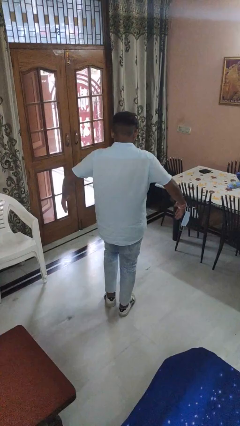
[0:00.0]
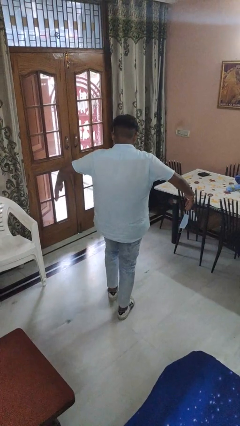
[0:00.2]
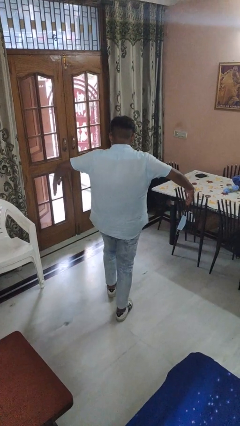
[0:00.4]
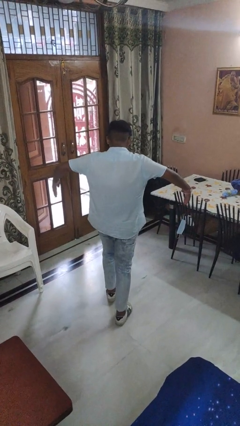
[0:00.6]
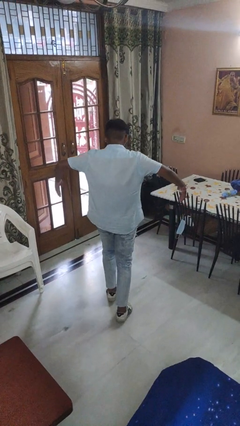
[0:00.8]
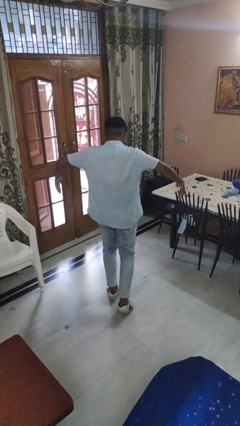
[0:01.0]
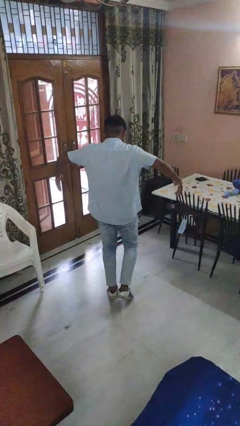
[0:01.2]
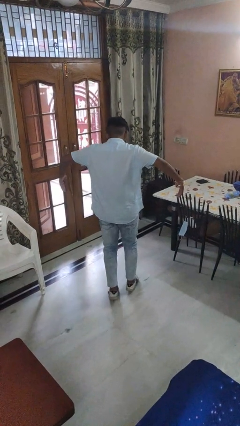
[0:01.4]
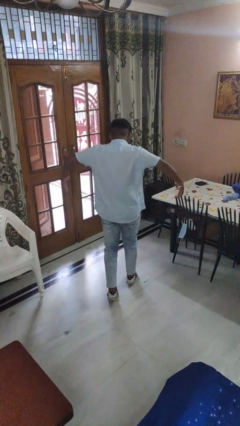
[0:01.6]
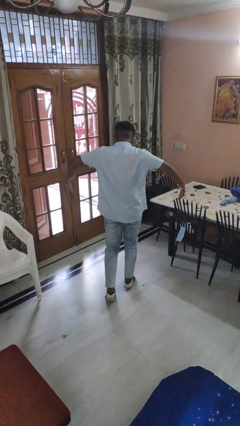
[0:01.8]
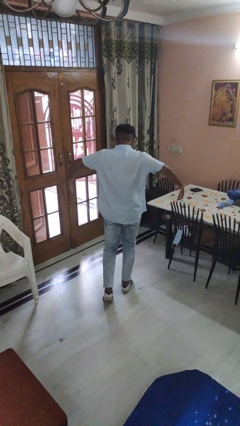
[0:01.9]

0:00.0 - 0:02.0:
person walks tiptoe

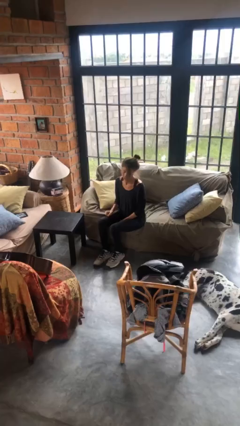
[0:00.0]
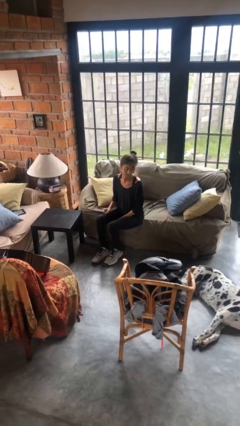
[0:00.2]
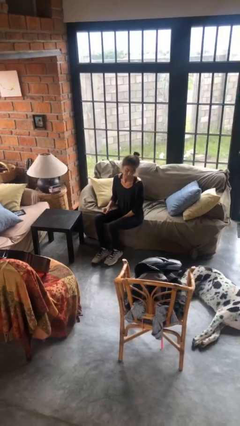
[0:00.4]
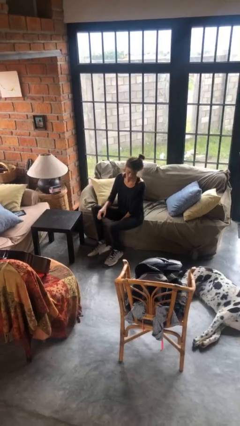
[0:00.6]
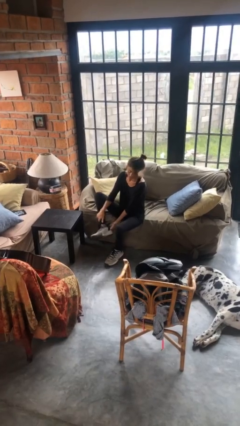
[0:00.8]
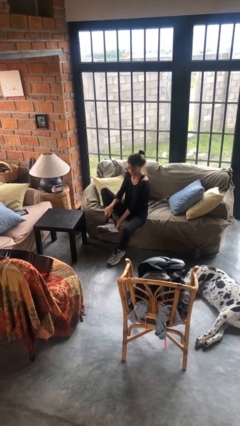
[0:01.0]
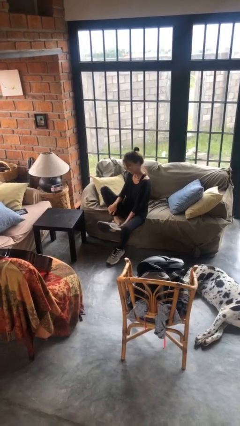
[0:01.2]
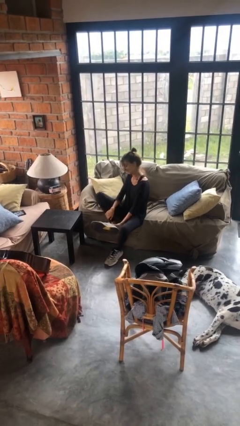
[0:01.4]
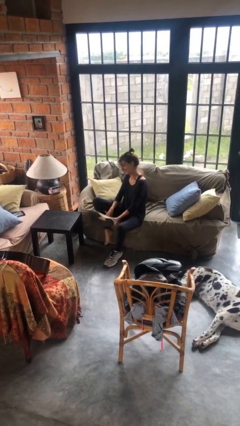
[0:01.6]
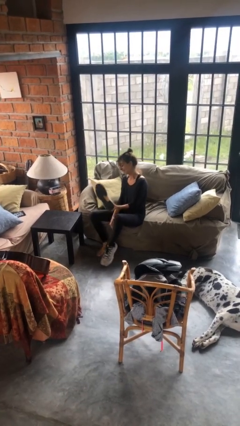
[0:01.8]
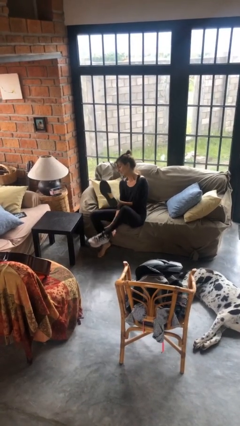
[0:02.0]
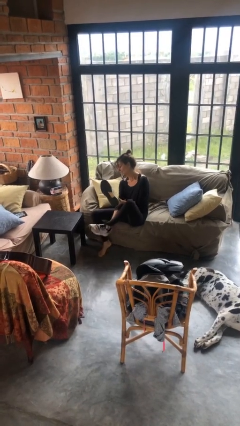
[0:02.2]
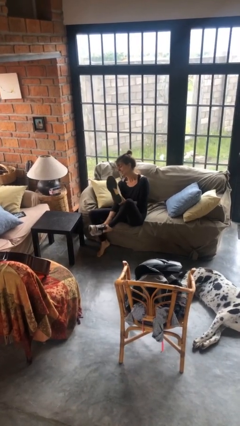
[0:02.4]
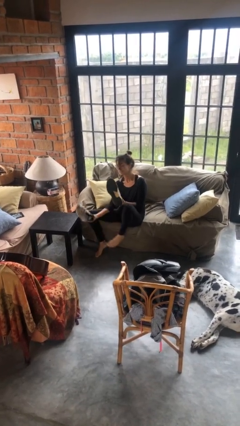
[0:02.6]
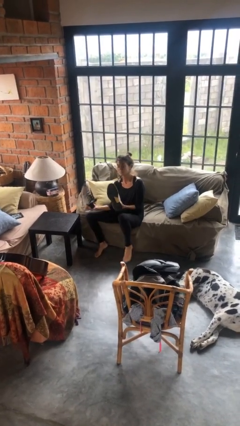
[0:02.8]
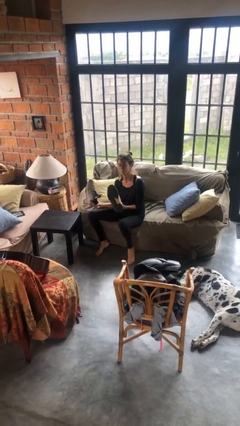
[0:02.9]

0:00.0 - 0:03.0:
person takes off shoes

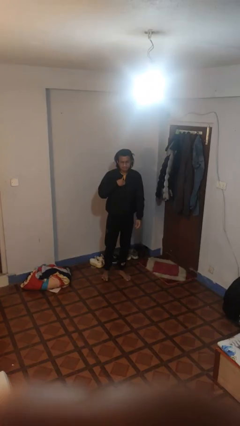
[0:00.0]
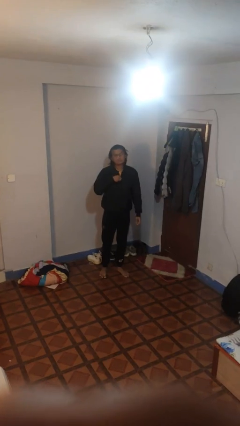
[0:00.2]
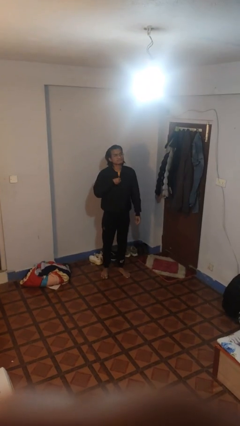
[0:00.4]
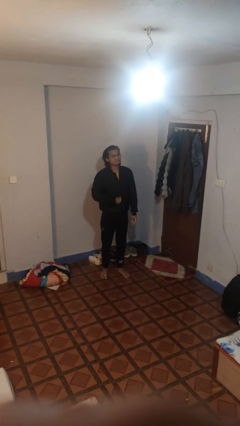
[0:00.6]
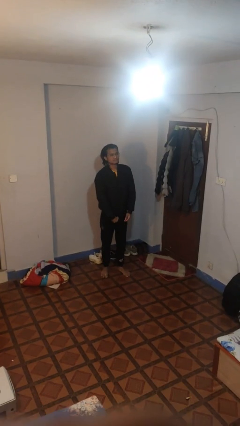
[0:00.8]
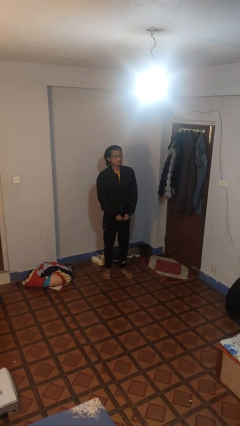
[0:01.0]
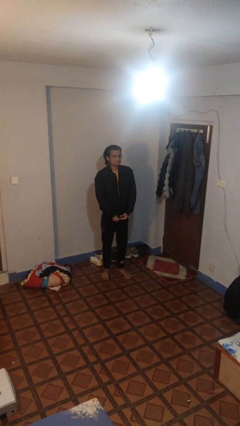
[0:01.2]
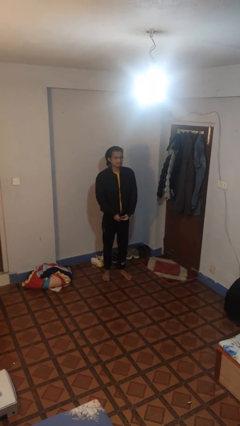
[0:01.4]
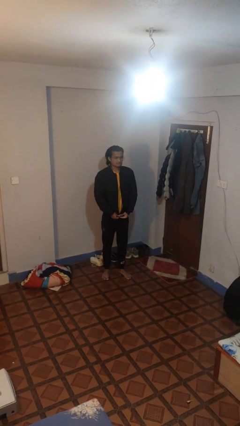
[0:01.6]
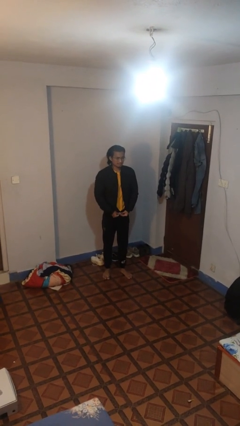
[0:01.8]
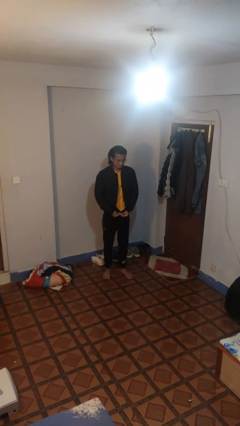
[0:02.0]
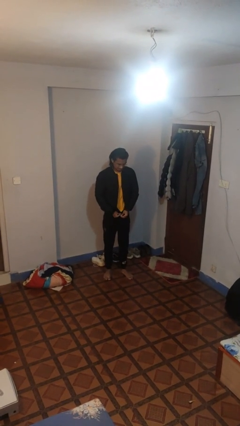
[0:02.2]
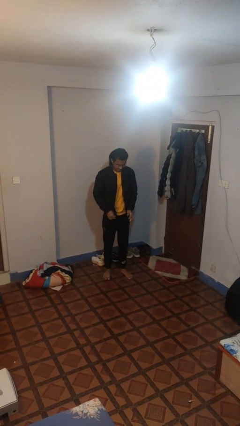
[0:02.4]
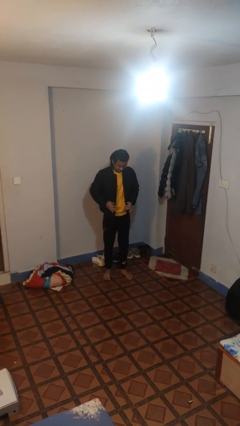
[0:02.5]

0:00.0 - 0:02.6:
person unzips jacket

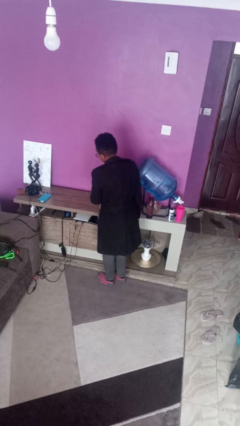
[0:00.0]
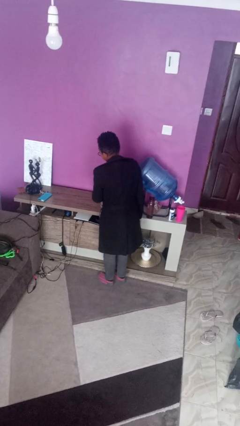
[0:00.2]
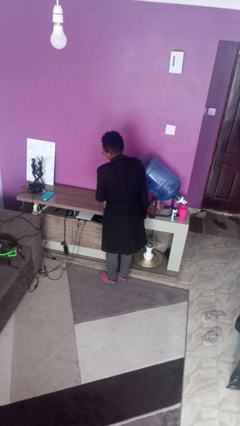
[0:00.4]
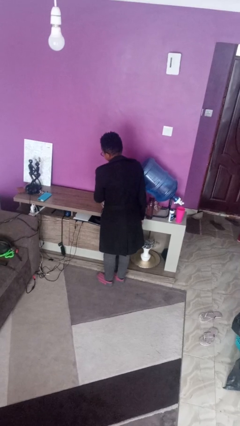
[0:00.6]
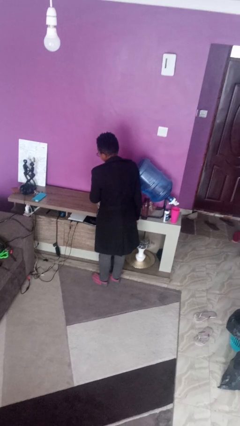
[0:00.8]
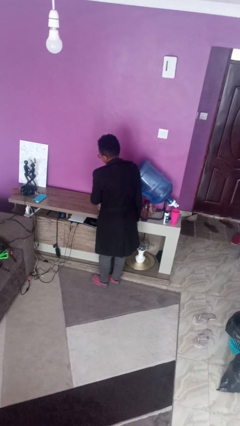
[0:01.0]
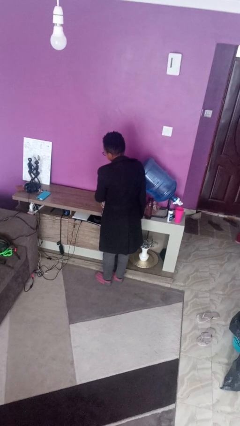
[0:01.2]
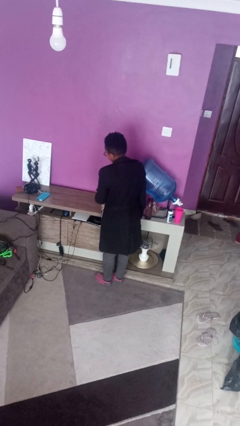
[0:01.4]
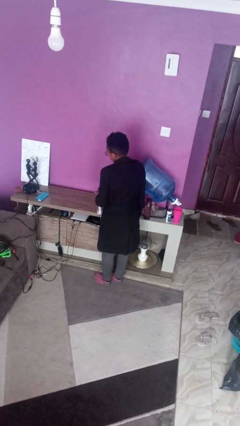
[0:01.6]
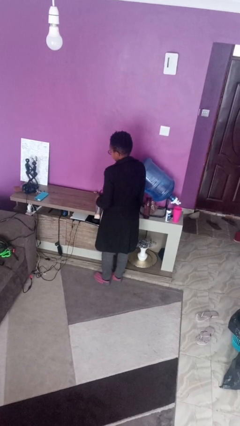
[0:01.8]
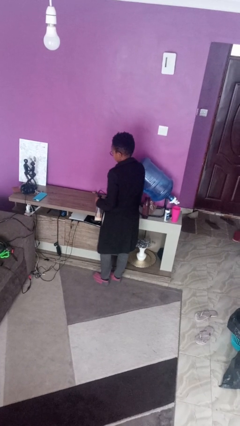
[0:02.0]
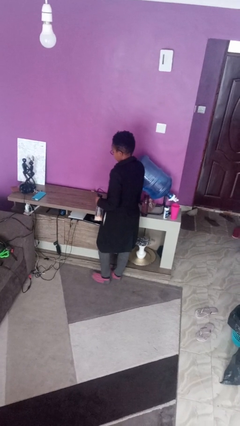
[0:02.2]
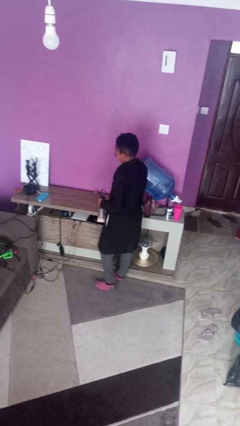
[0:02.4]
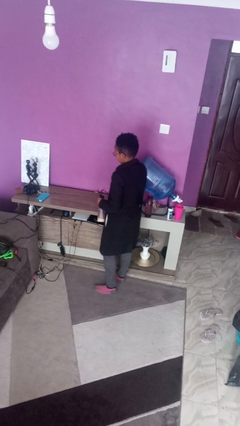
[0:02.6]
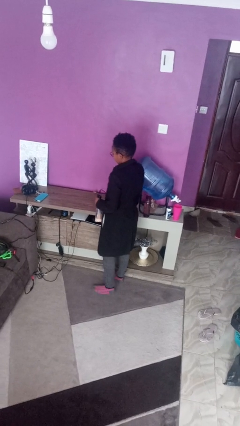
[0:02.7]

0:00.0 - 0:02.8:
person sprays from bottle

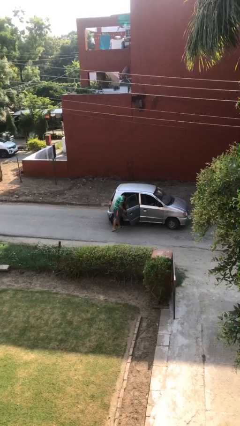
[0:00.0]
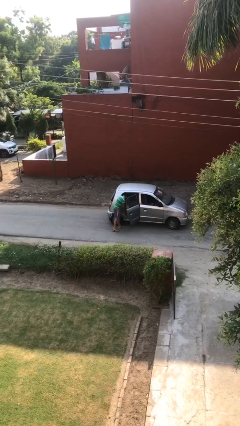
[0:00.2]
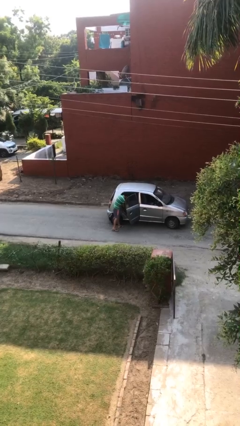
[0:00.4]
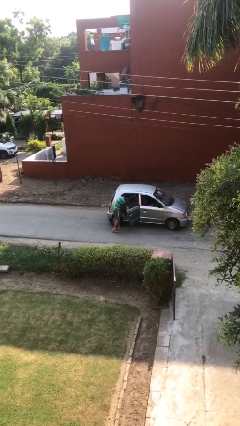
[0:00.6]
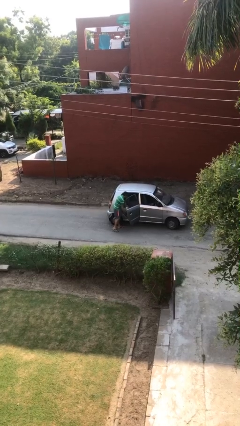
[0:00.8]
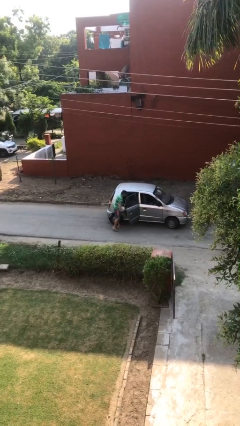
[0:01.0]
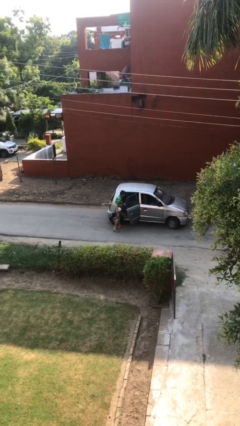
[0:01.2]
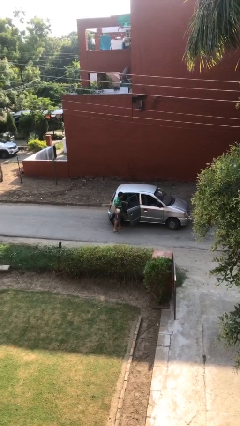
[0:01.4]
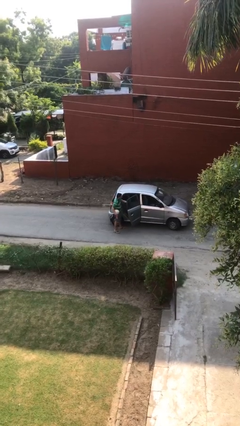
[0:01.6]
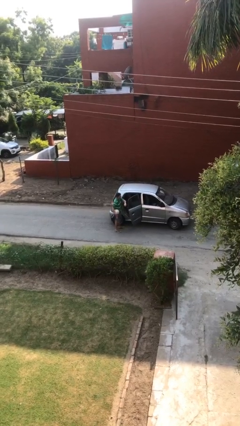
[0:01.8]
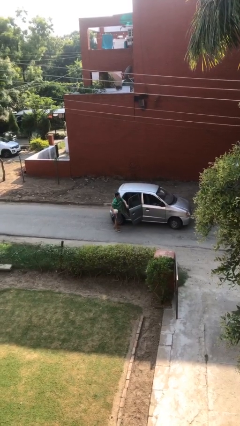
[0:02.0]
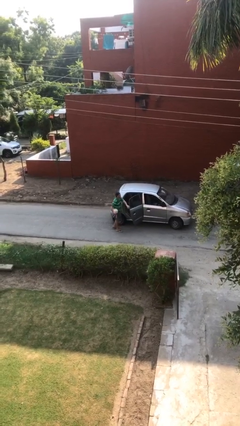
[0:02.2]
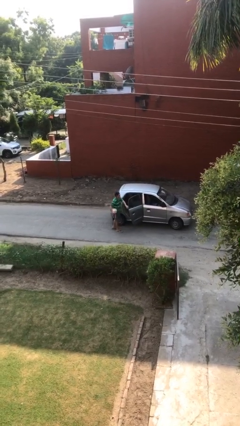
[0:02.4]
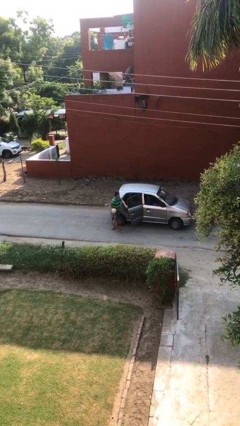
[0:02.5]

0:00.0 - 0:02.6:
person unloads car

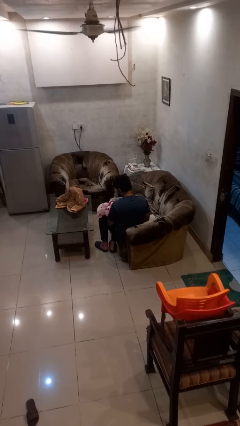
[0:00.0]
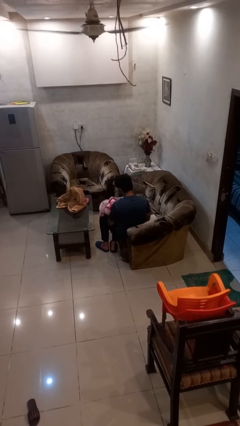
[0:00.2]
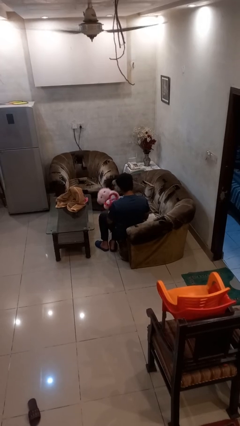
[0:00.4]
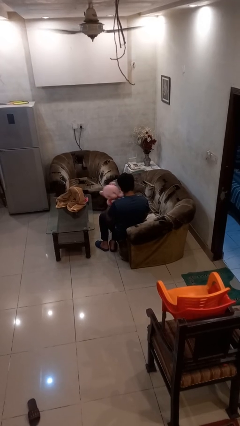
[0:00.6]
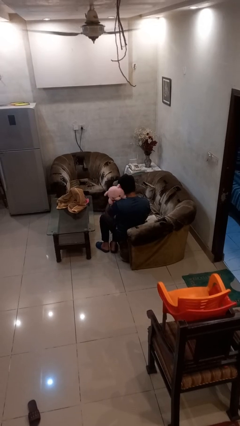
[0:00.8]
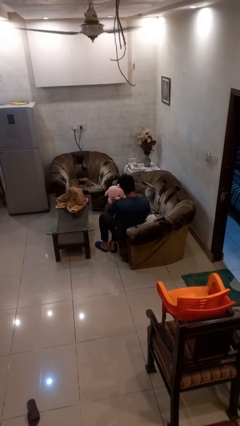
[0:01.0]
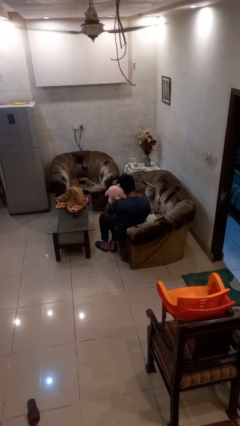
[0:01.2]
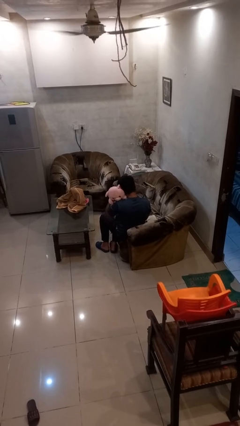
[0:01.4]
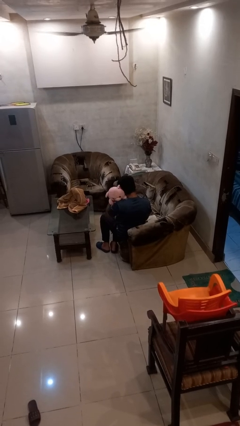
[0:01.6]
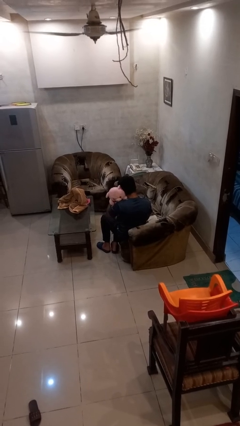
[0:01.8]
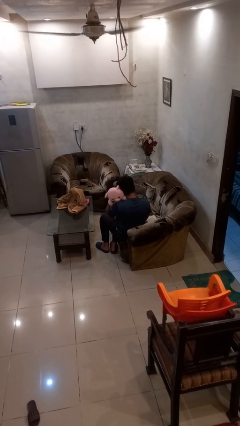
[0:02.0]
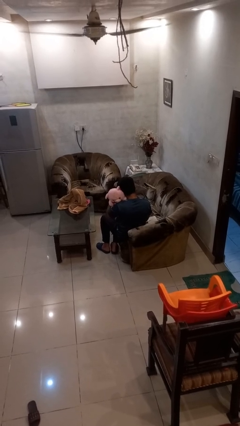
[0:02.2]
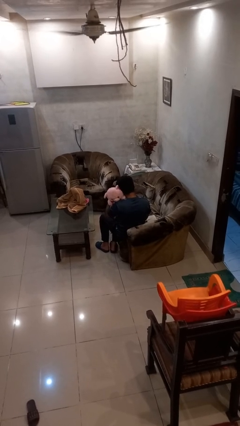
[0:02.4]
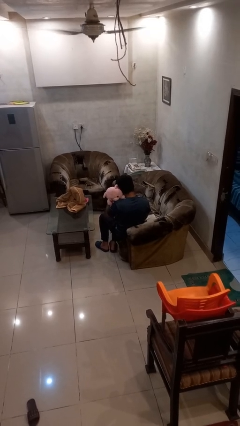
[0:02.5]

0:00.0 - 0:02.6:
person hugs stuffed animal

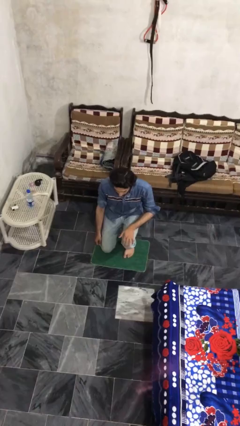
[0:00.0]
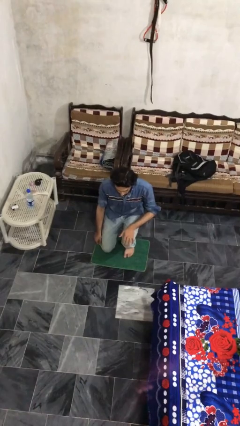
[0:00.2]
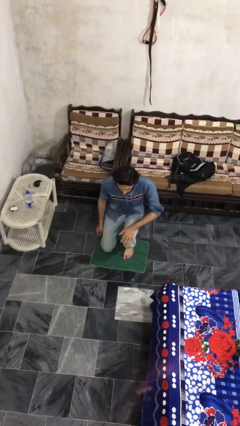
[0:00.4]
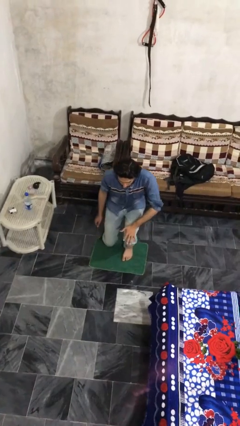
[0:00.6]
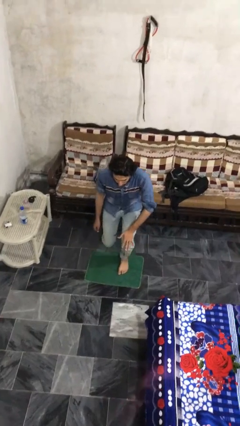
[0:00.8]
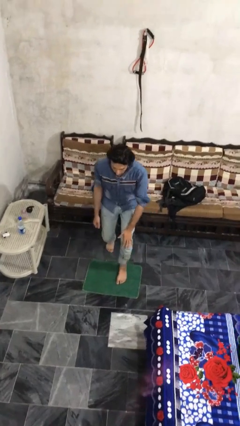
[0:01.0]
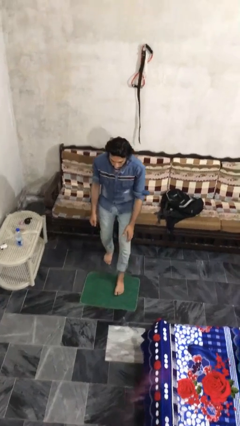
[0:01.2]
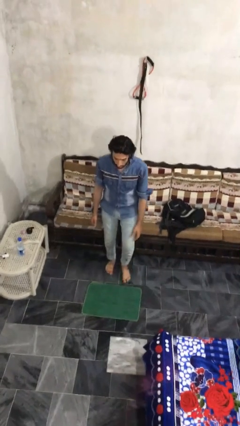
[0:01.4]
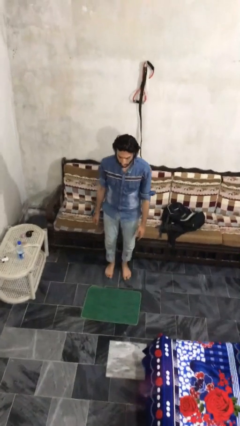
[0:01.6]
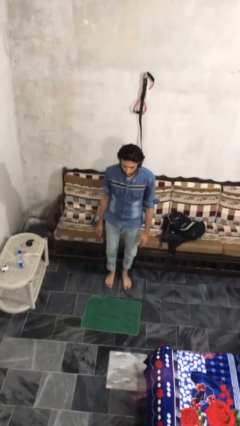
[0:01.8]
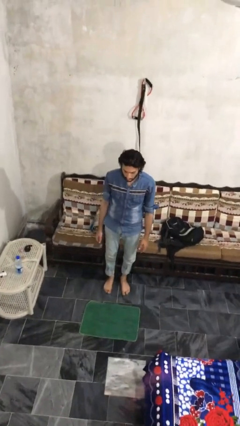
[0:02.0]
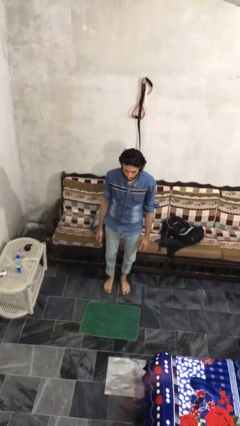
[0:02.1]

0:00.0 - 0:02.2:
person stands up from floor
